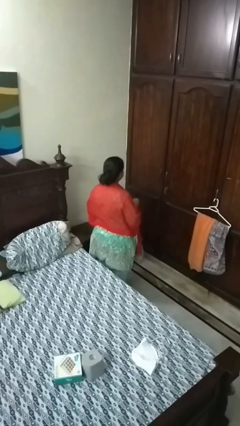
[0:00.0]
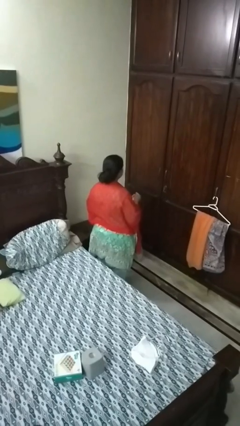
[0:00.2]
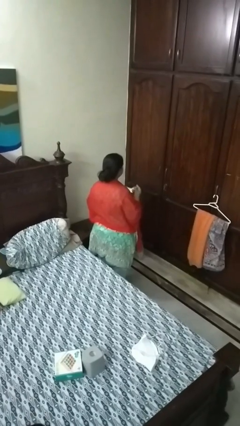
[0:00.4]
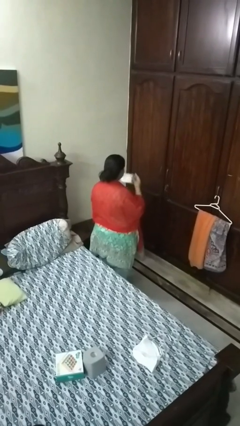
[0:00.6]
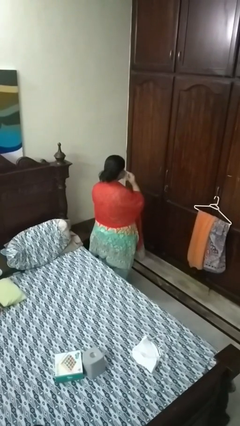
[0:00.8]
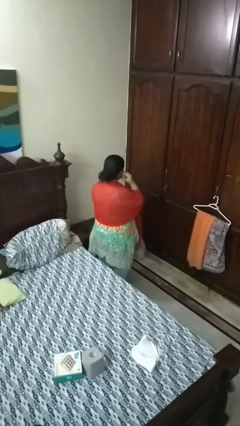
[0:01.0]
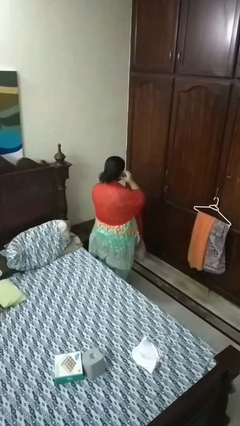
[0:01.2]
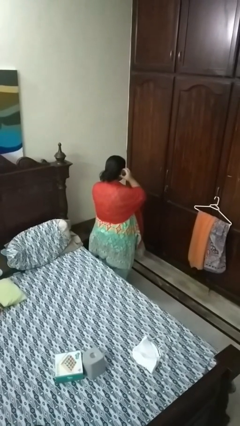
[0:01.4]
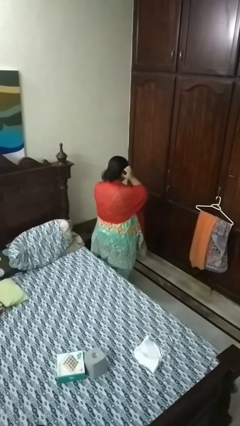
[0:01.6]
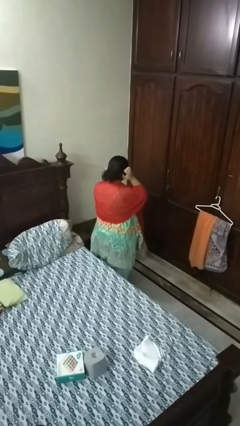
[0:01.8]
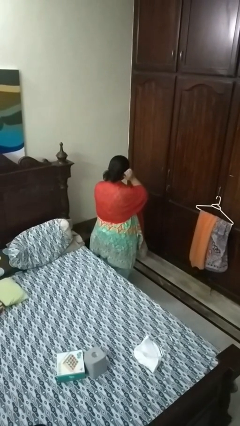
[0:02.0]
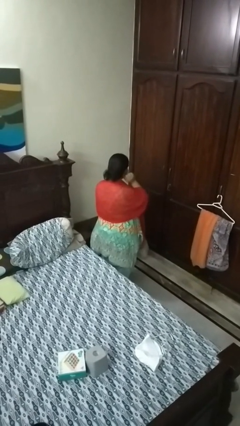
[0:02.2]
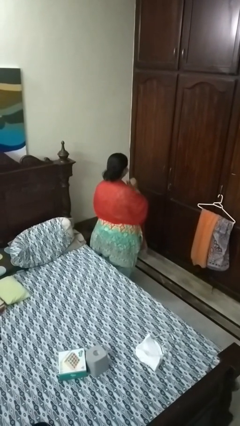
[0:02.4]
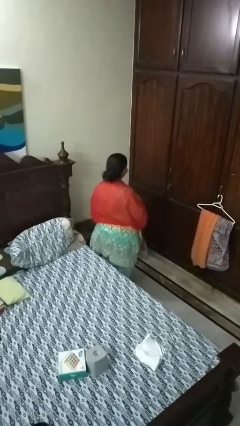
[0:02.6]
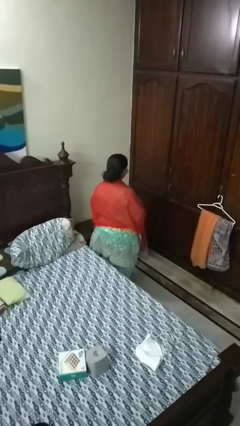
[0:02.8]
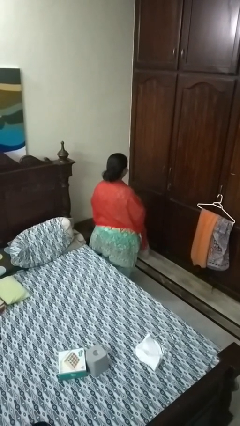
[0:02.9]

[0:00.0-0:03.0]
person puts on facemask

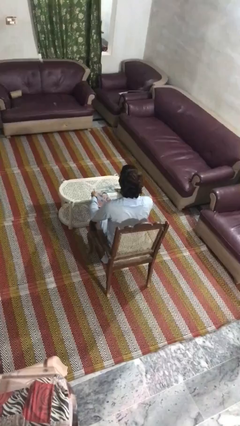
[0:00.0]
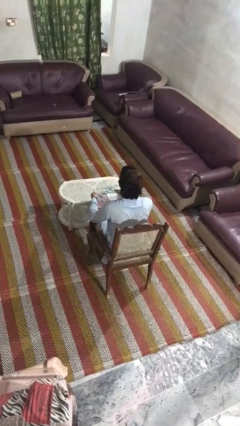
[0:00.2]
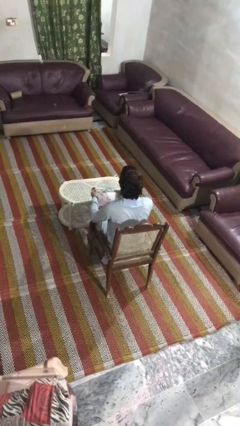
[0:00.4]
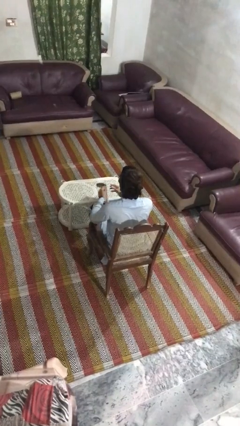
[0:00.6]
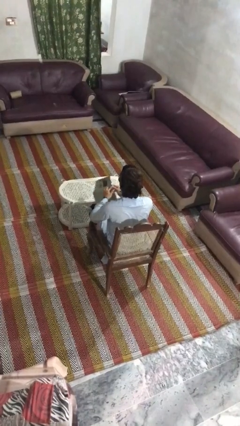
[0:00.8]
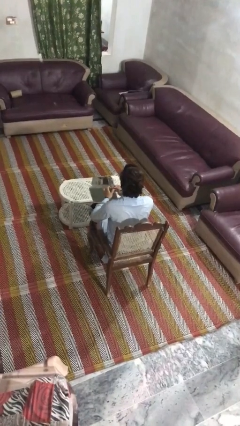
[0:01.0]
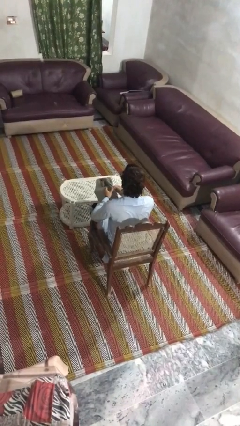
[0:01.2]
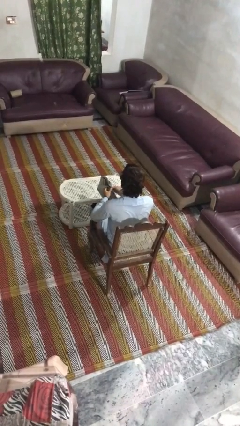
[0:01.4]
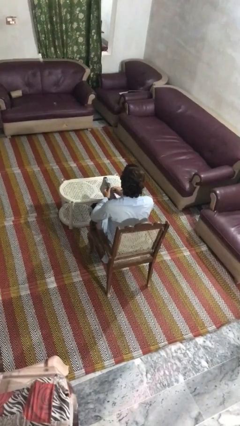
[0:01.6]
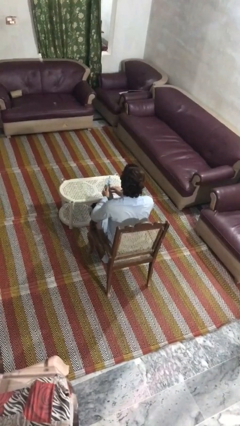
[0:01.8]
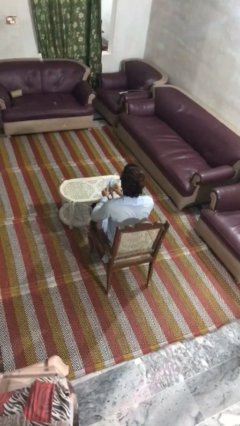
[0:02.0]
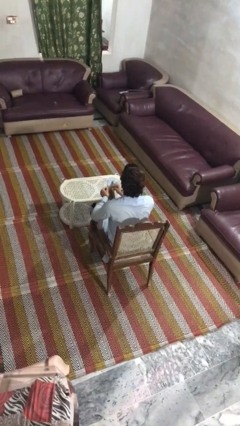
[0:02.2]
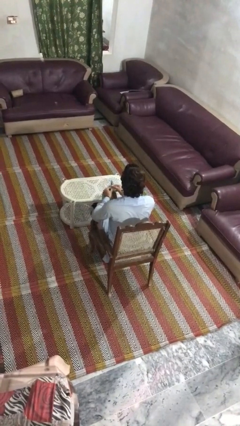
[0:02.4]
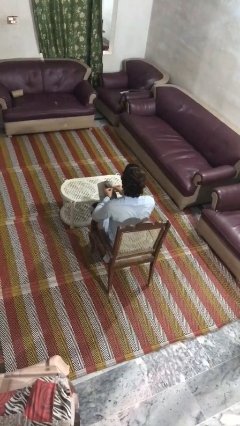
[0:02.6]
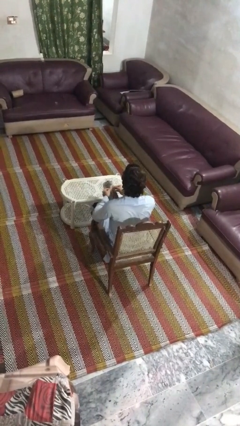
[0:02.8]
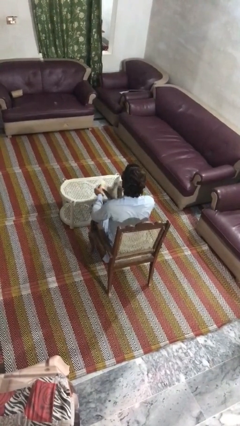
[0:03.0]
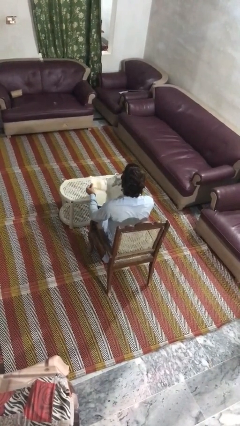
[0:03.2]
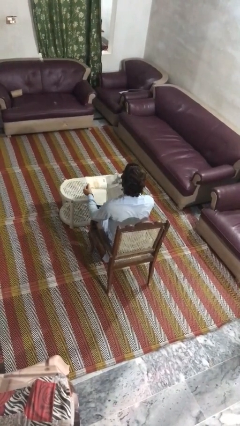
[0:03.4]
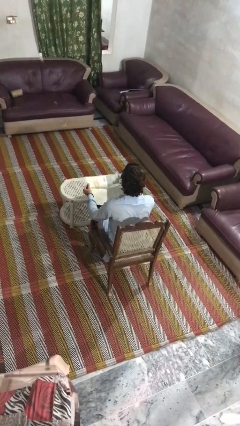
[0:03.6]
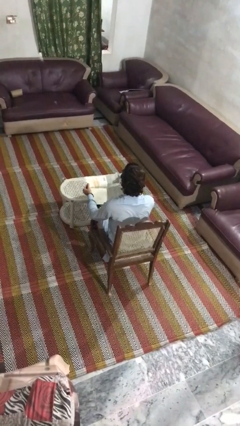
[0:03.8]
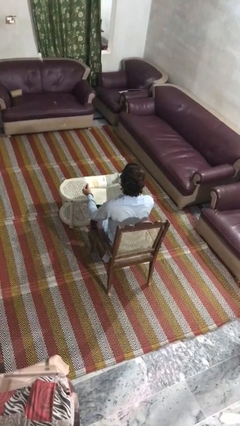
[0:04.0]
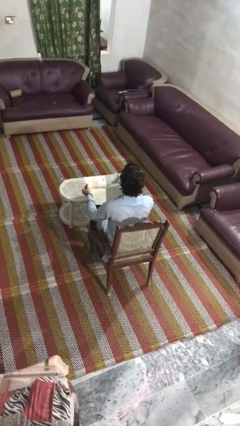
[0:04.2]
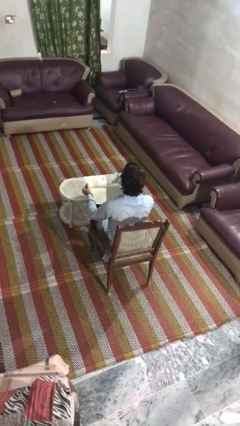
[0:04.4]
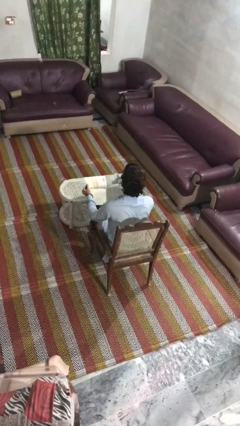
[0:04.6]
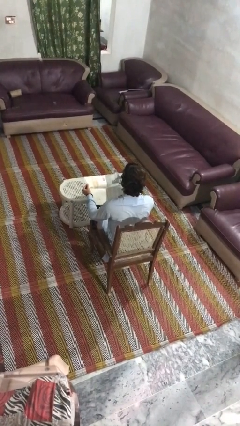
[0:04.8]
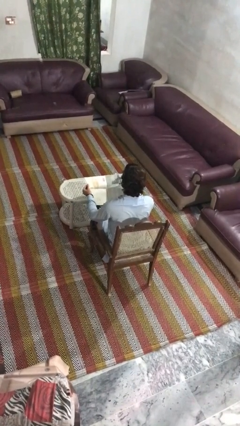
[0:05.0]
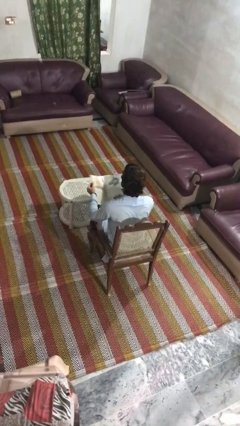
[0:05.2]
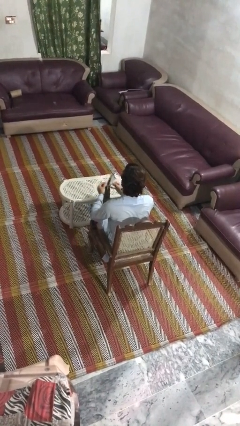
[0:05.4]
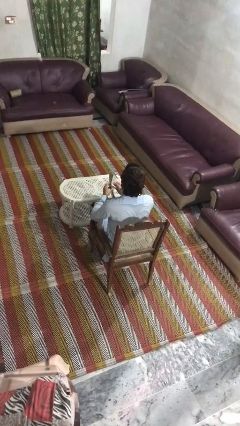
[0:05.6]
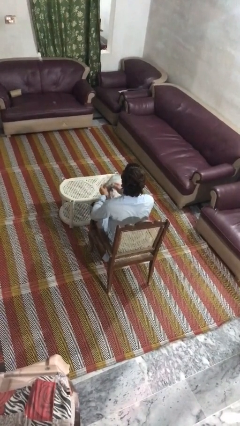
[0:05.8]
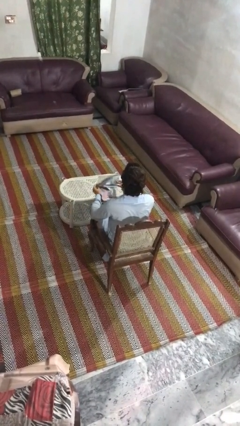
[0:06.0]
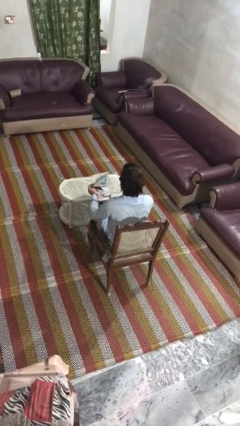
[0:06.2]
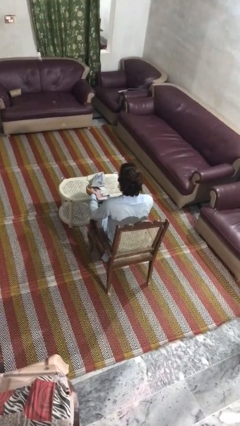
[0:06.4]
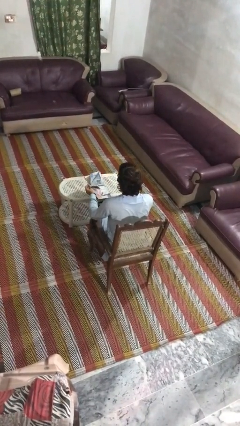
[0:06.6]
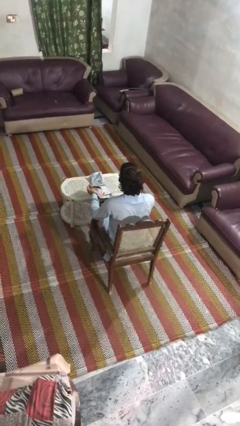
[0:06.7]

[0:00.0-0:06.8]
person reads magazine

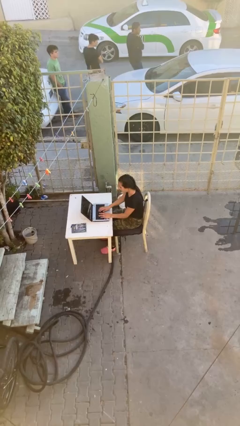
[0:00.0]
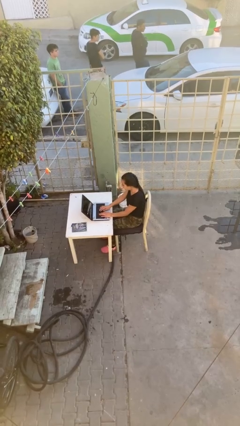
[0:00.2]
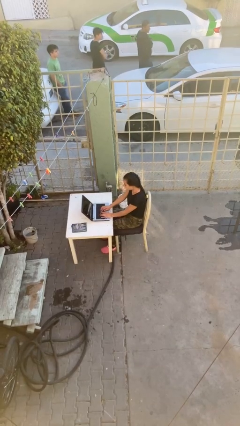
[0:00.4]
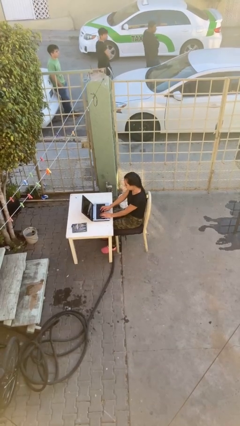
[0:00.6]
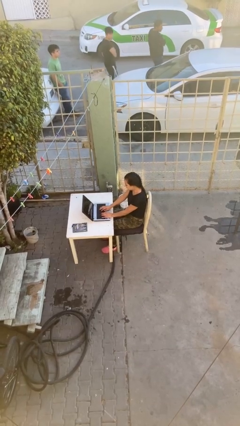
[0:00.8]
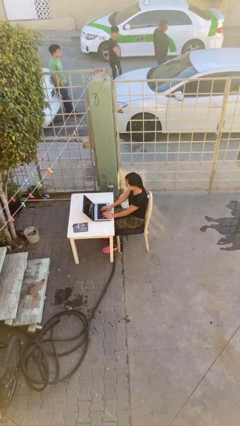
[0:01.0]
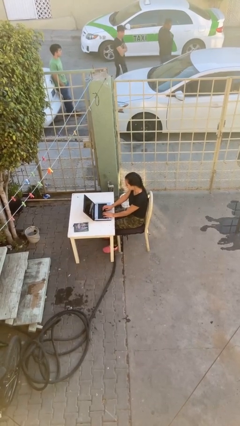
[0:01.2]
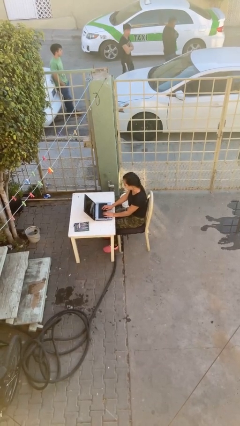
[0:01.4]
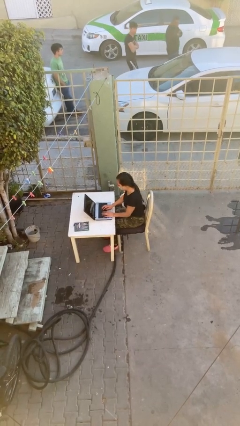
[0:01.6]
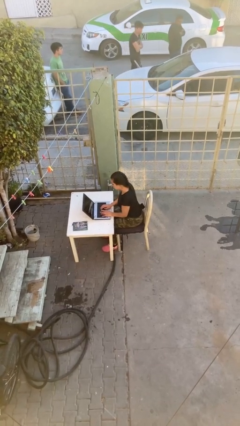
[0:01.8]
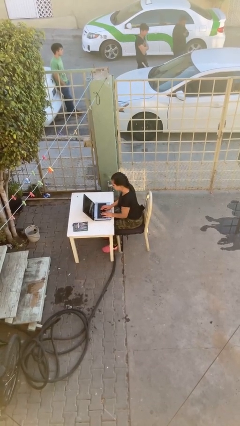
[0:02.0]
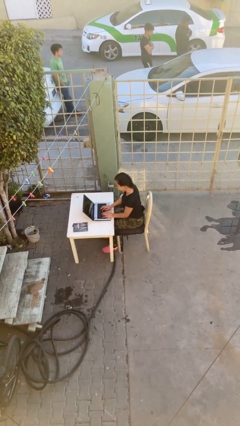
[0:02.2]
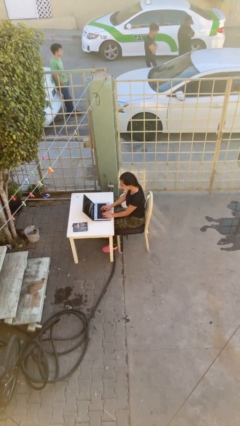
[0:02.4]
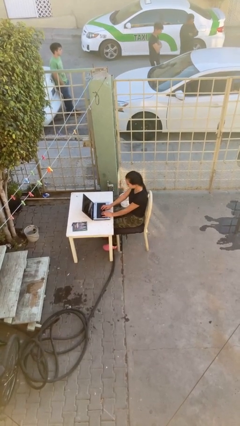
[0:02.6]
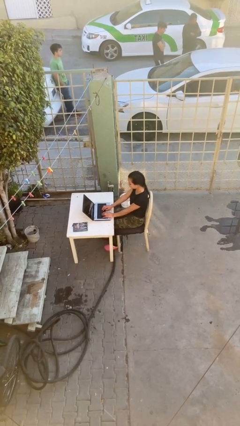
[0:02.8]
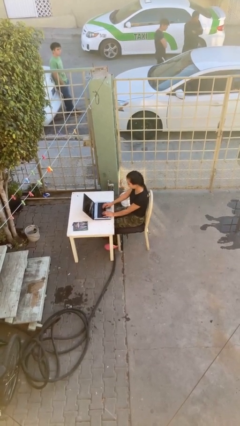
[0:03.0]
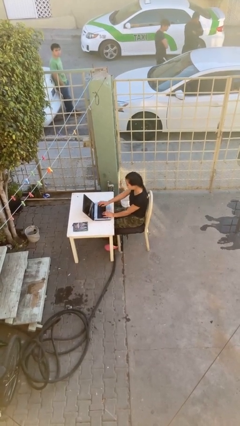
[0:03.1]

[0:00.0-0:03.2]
person interacts with laptop

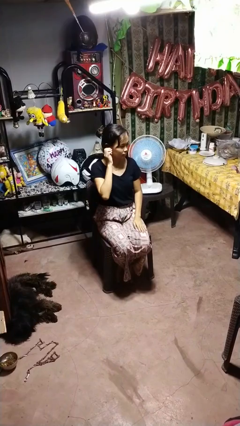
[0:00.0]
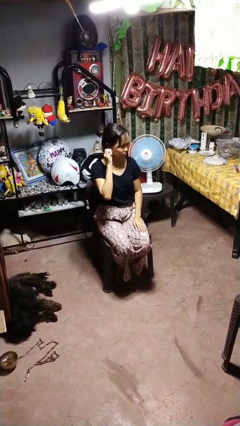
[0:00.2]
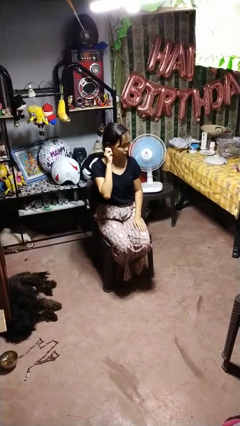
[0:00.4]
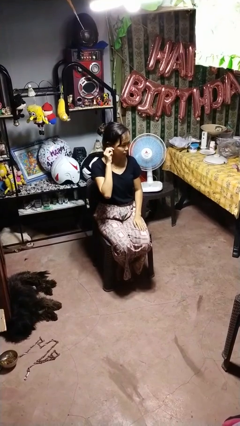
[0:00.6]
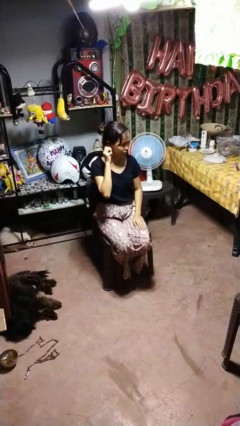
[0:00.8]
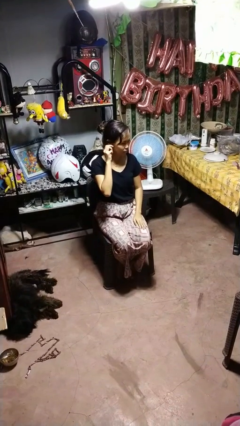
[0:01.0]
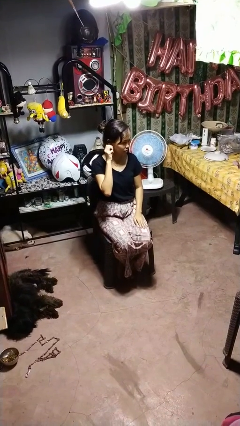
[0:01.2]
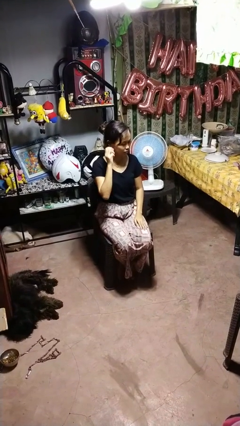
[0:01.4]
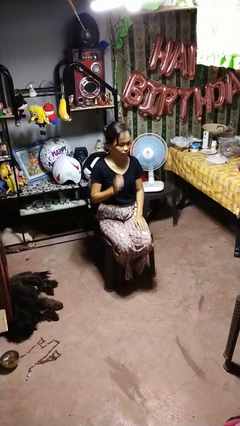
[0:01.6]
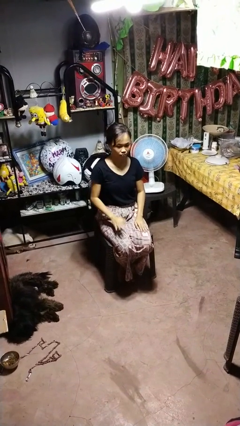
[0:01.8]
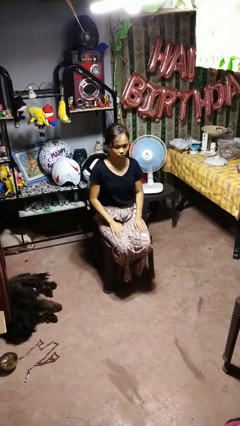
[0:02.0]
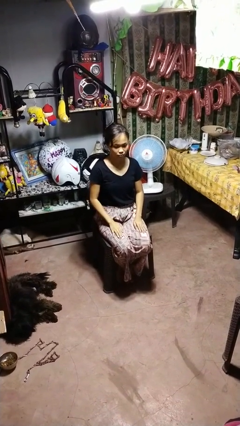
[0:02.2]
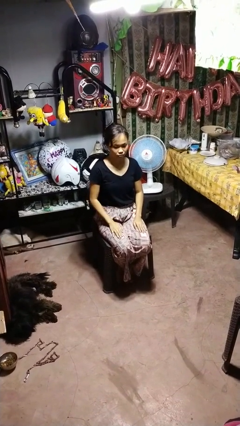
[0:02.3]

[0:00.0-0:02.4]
person touches earlobe

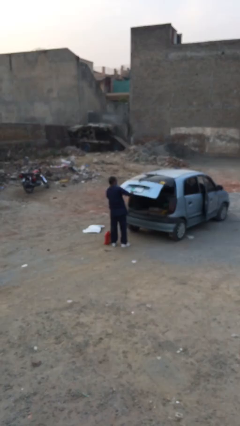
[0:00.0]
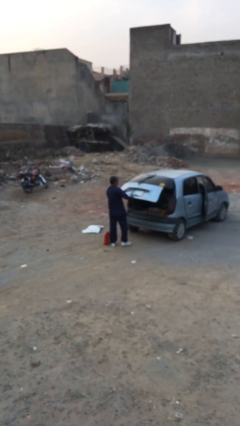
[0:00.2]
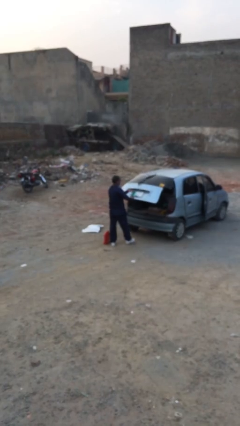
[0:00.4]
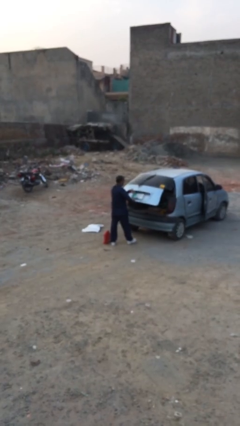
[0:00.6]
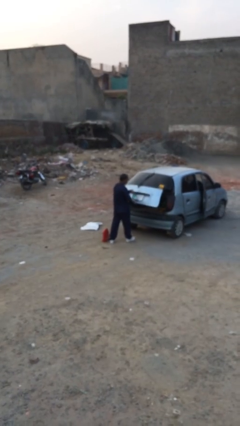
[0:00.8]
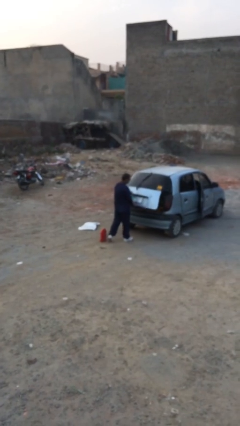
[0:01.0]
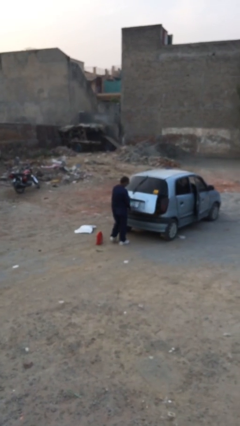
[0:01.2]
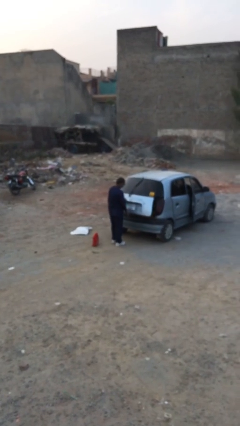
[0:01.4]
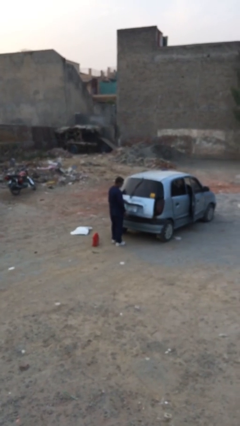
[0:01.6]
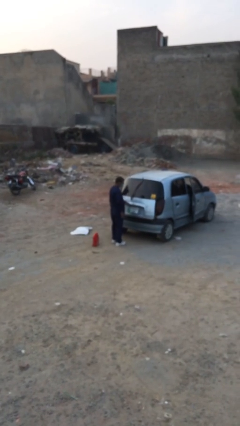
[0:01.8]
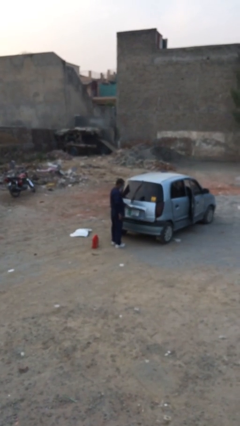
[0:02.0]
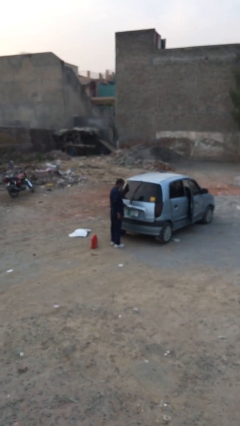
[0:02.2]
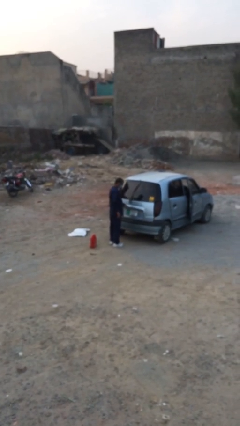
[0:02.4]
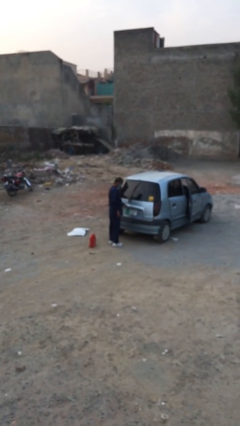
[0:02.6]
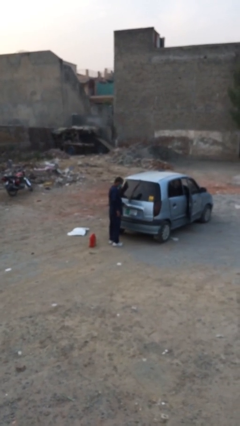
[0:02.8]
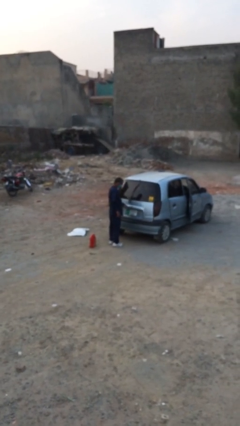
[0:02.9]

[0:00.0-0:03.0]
person closes car trunk
